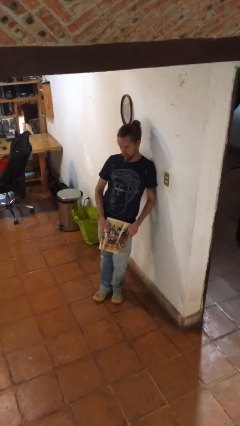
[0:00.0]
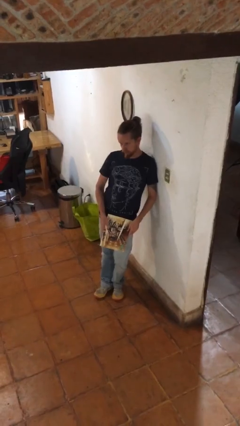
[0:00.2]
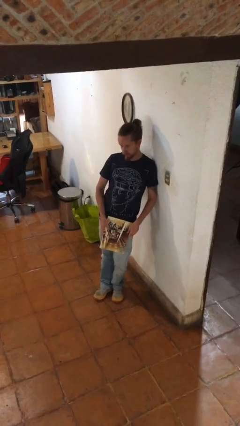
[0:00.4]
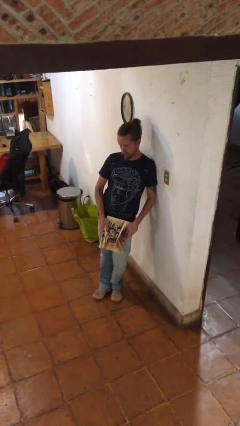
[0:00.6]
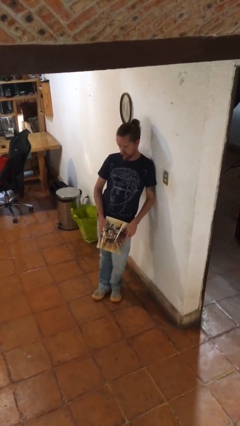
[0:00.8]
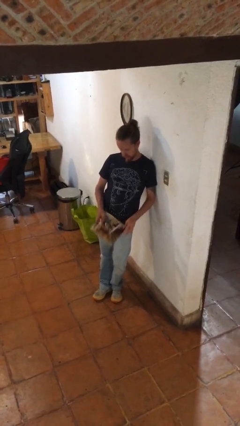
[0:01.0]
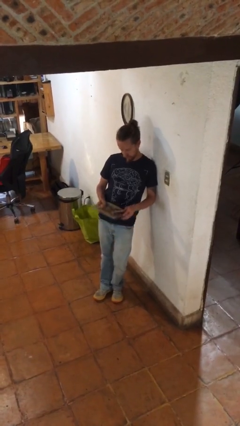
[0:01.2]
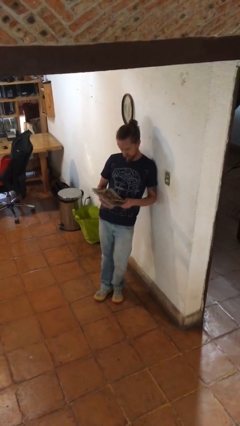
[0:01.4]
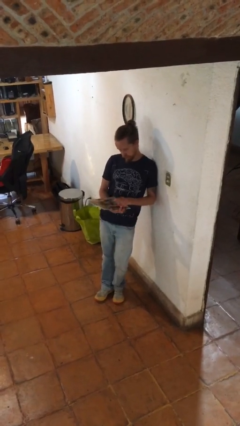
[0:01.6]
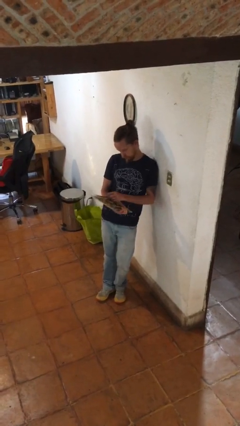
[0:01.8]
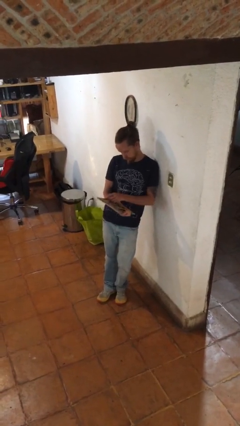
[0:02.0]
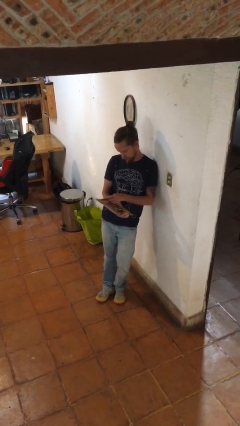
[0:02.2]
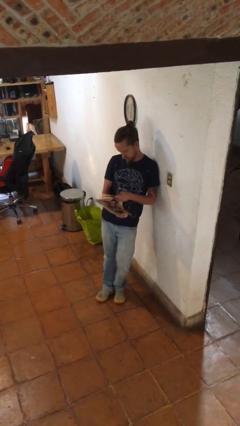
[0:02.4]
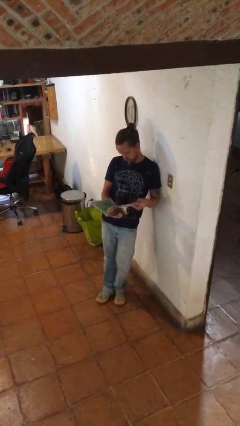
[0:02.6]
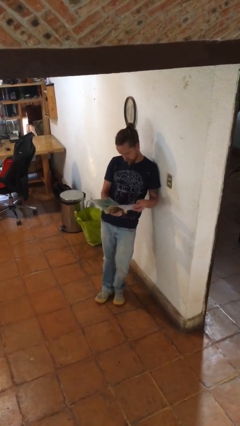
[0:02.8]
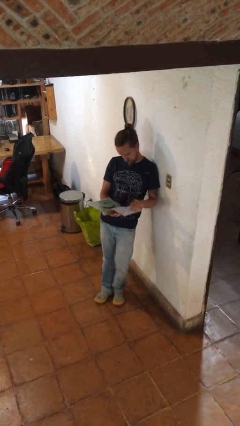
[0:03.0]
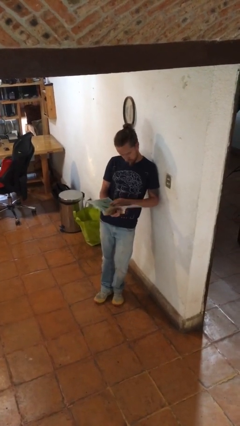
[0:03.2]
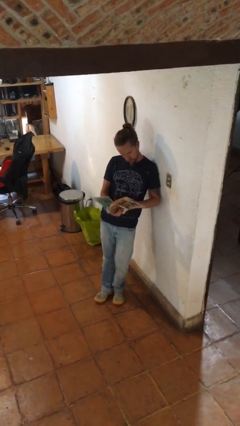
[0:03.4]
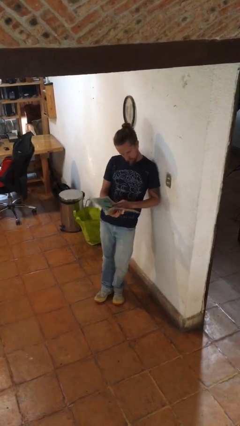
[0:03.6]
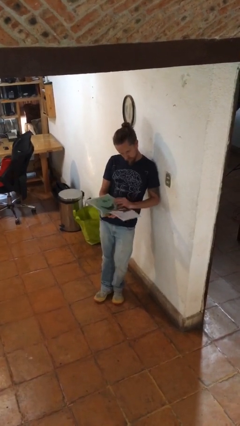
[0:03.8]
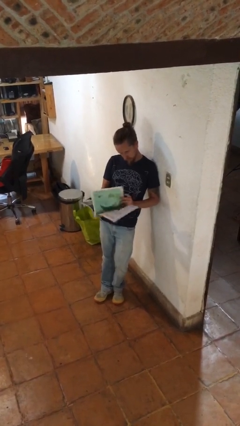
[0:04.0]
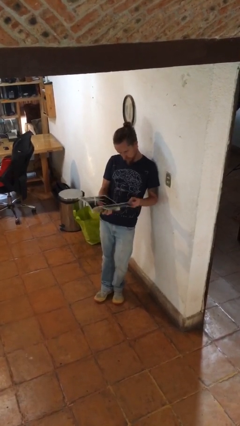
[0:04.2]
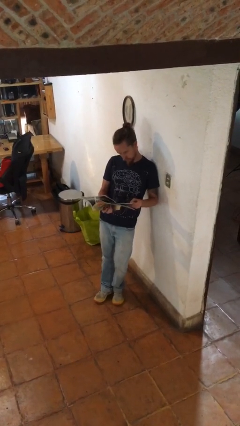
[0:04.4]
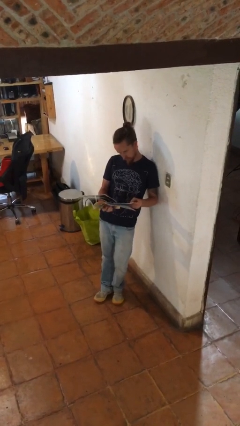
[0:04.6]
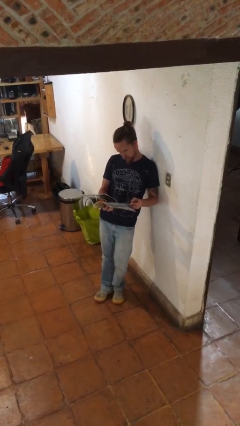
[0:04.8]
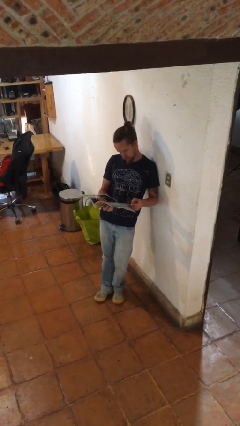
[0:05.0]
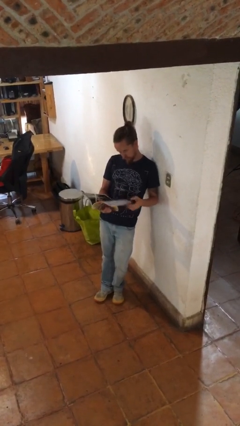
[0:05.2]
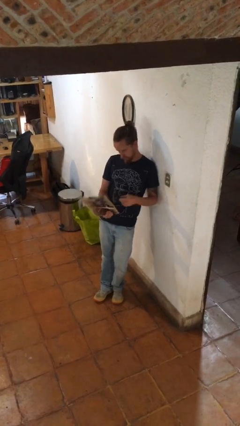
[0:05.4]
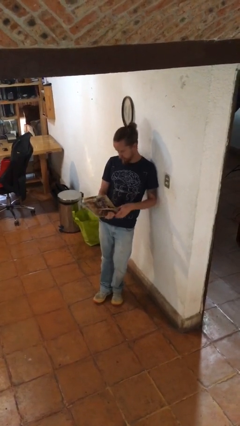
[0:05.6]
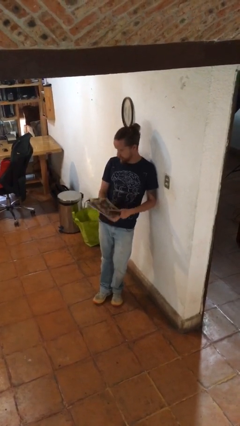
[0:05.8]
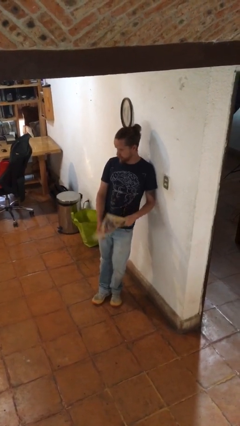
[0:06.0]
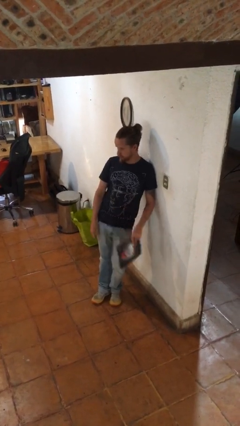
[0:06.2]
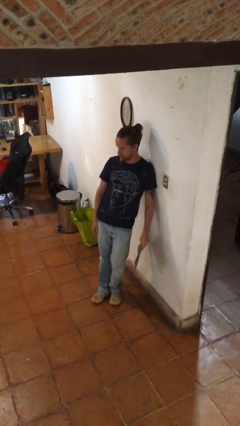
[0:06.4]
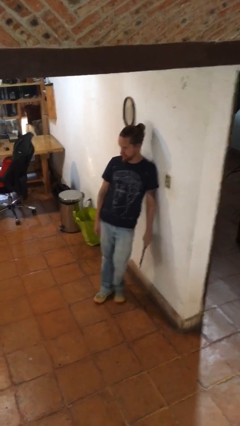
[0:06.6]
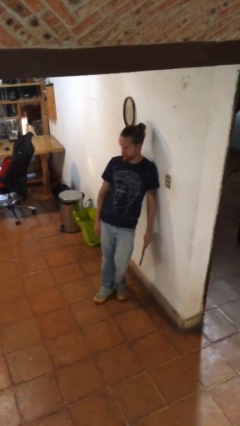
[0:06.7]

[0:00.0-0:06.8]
person reads magazine

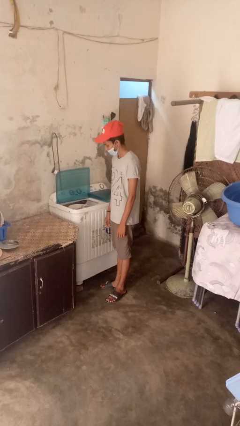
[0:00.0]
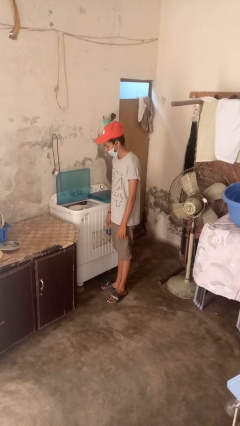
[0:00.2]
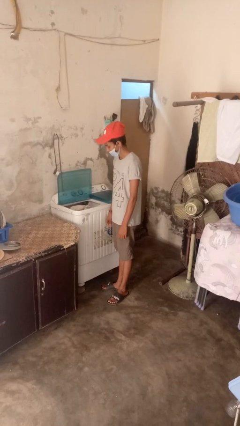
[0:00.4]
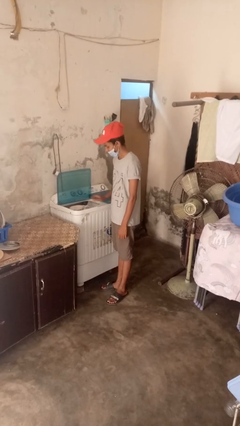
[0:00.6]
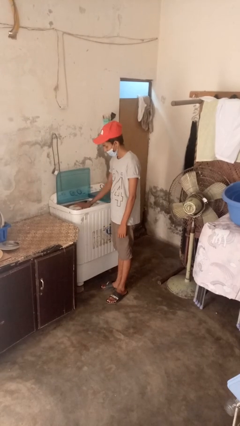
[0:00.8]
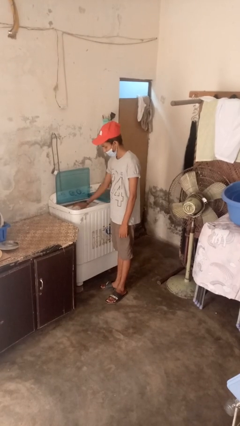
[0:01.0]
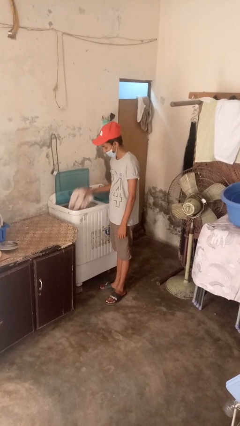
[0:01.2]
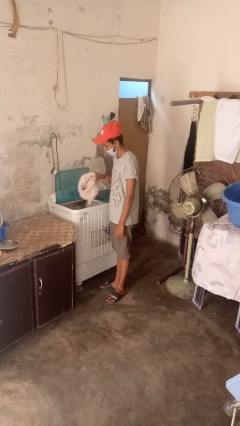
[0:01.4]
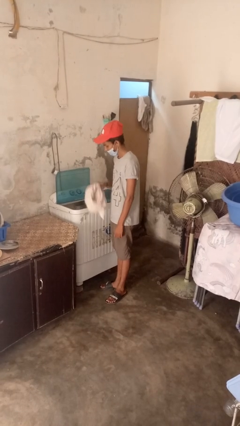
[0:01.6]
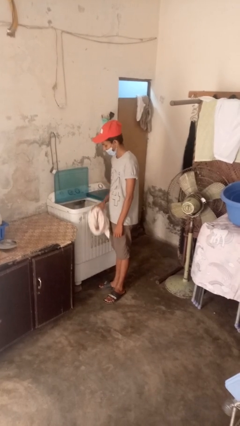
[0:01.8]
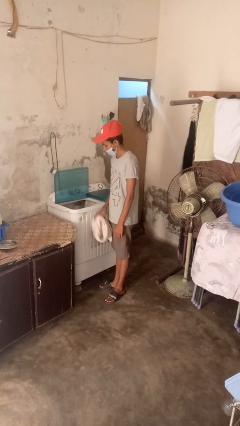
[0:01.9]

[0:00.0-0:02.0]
person unloads dryer

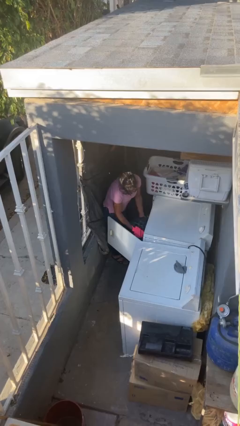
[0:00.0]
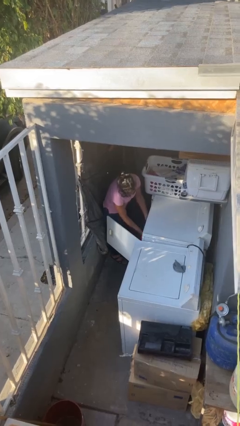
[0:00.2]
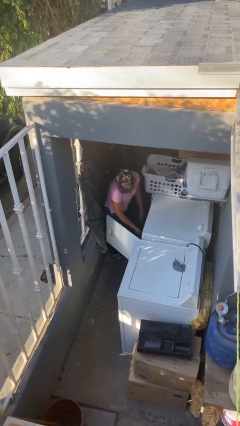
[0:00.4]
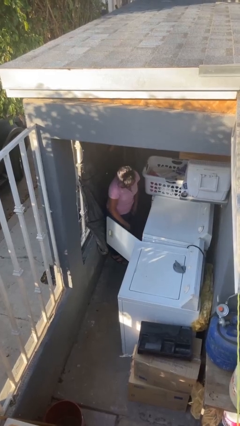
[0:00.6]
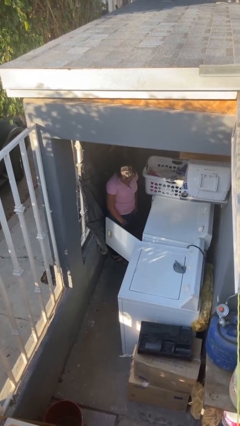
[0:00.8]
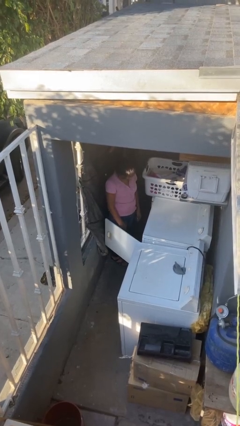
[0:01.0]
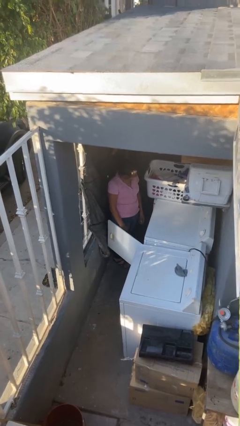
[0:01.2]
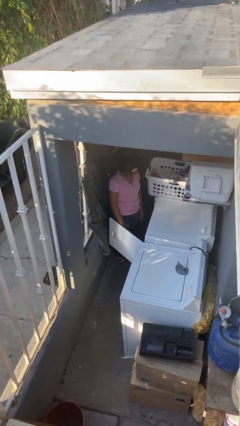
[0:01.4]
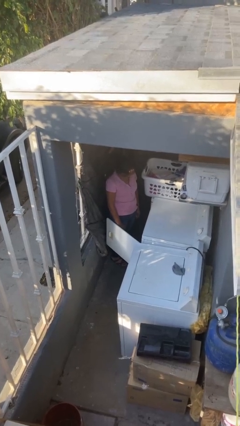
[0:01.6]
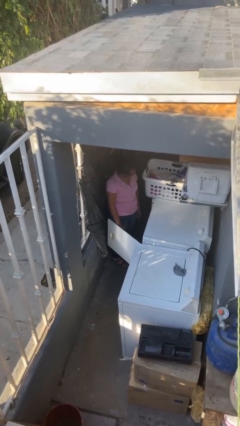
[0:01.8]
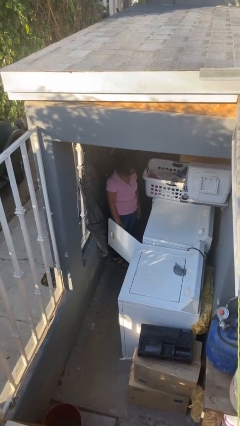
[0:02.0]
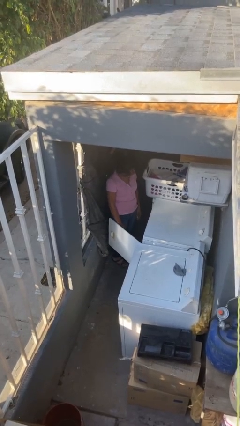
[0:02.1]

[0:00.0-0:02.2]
person loads dryer

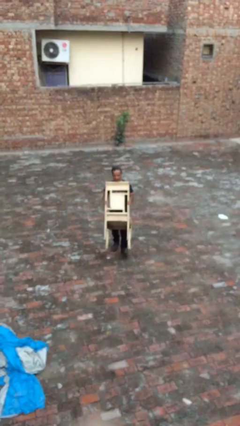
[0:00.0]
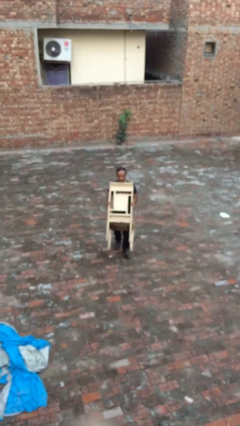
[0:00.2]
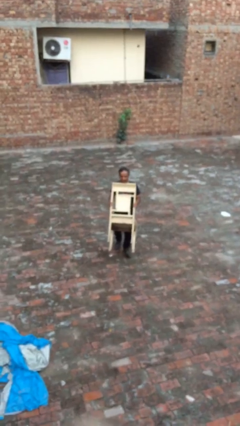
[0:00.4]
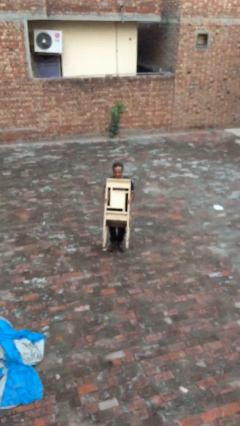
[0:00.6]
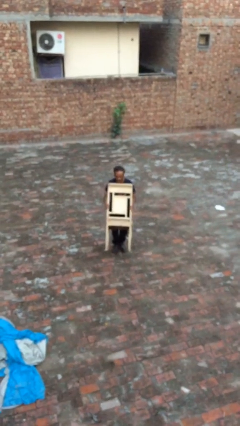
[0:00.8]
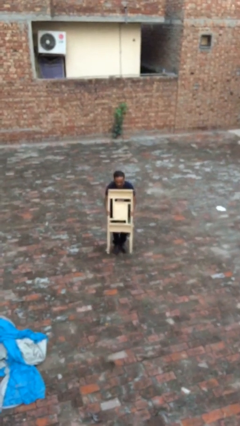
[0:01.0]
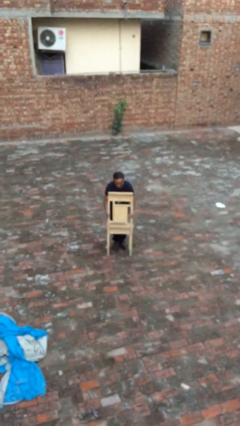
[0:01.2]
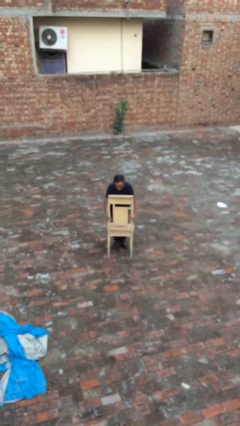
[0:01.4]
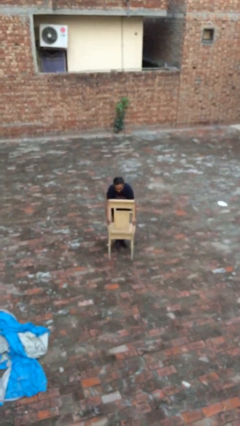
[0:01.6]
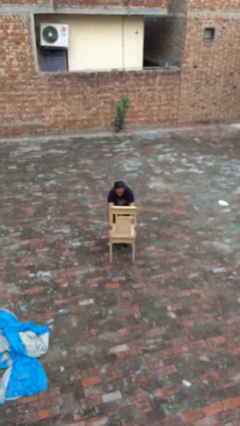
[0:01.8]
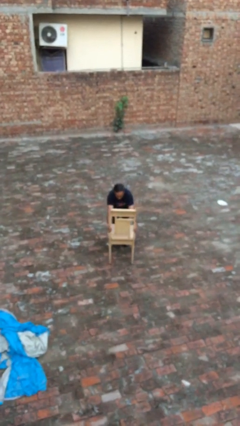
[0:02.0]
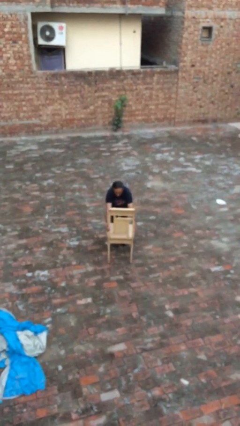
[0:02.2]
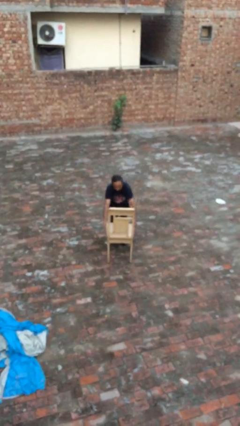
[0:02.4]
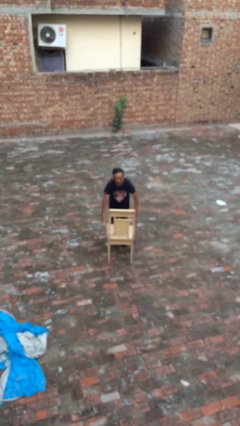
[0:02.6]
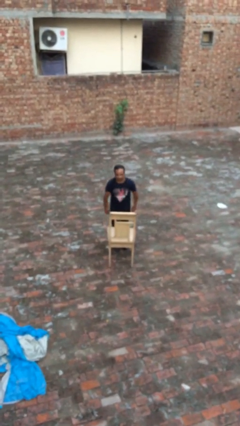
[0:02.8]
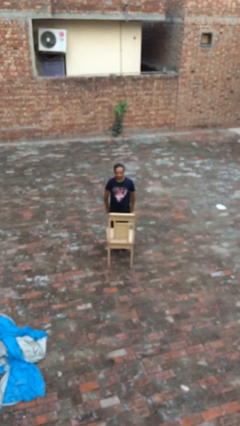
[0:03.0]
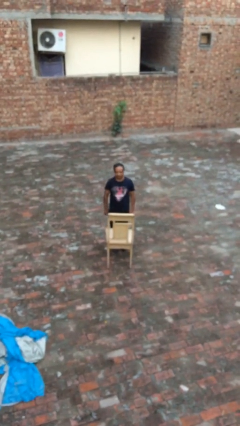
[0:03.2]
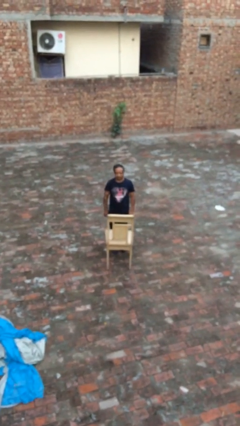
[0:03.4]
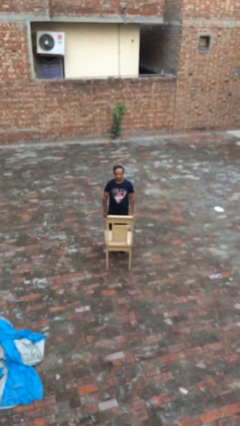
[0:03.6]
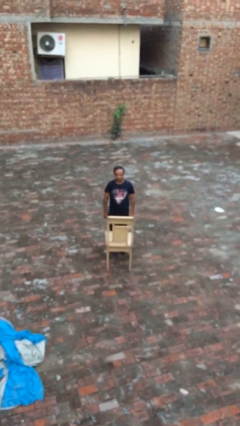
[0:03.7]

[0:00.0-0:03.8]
person puts down object on floor

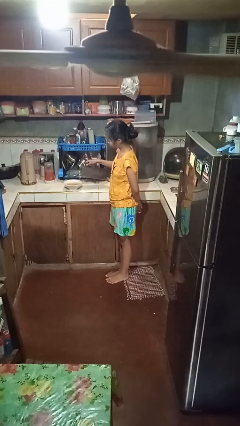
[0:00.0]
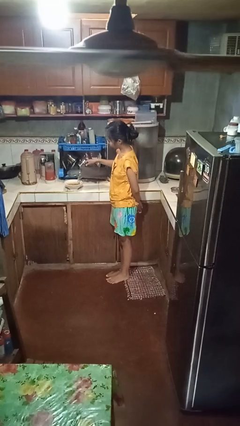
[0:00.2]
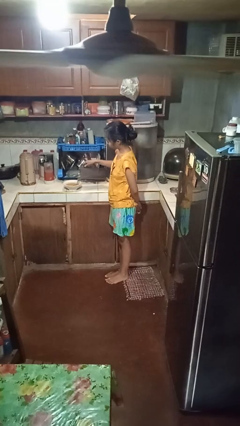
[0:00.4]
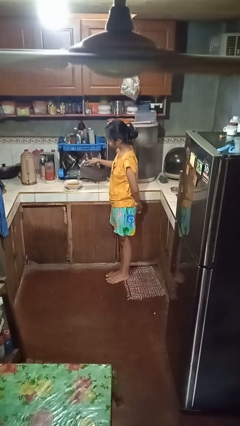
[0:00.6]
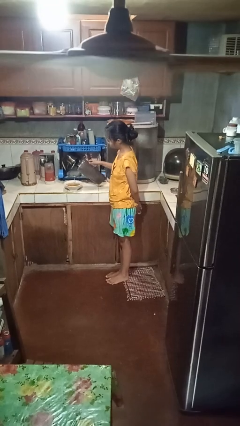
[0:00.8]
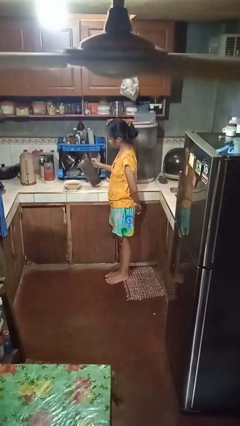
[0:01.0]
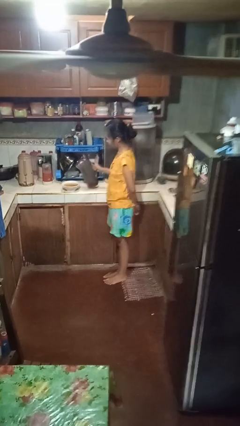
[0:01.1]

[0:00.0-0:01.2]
person pours into bowl

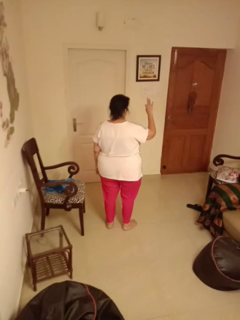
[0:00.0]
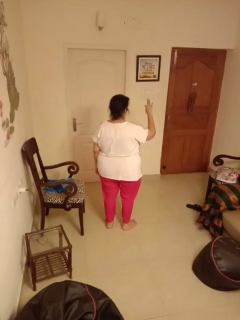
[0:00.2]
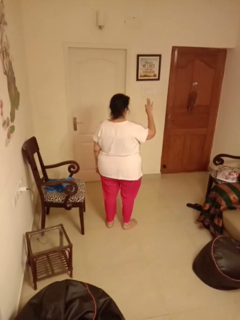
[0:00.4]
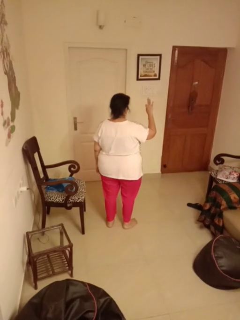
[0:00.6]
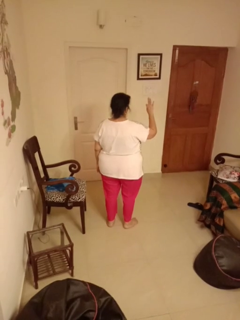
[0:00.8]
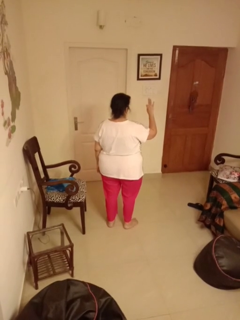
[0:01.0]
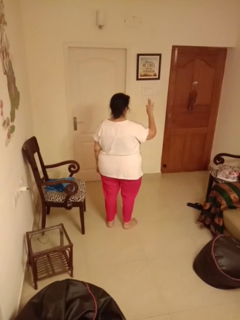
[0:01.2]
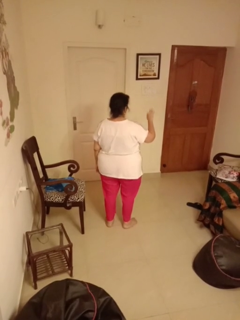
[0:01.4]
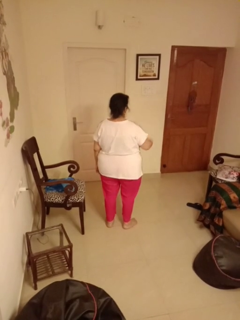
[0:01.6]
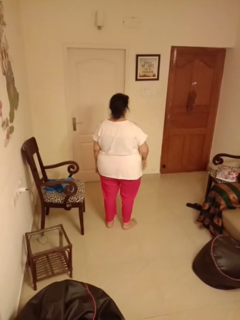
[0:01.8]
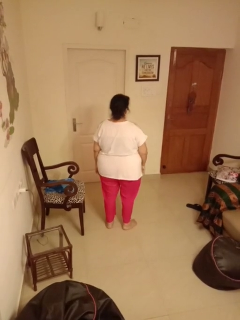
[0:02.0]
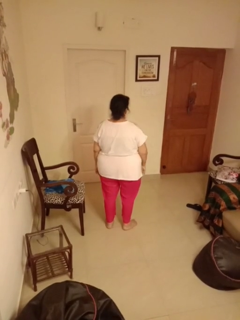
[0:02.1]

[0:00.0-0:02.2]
person gestures number three
